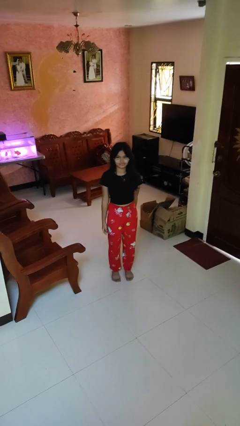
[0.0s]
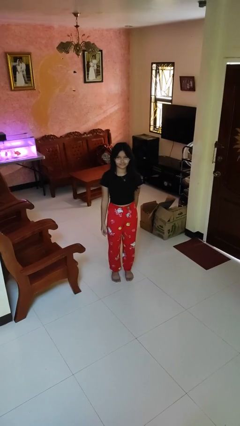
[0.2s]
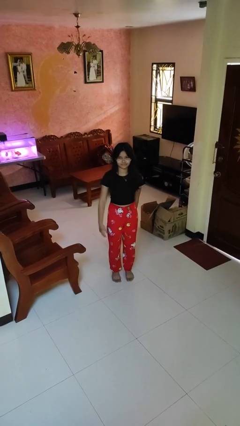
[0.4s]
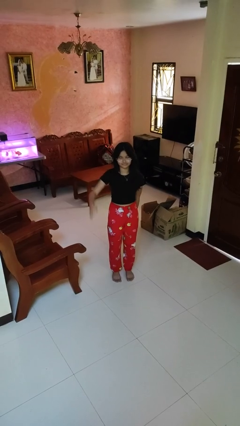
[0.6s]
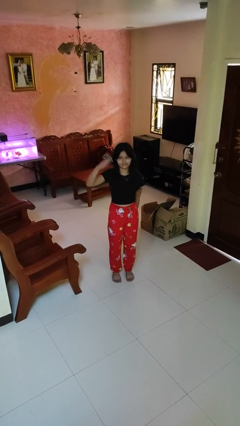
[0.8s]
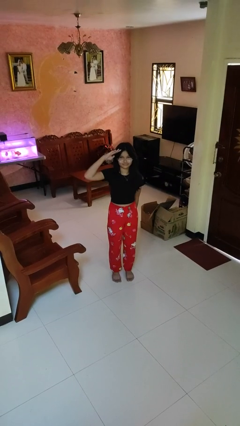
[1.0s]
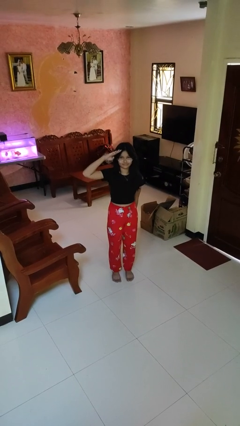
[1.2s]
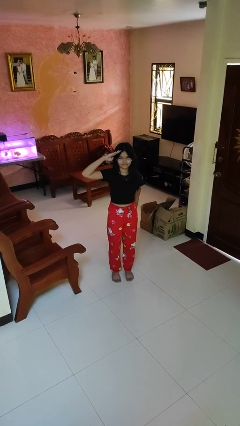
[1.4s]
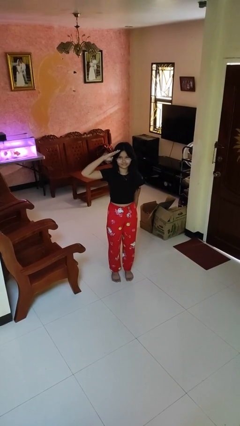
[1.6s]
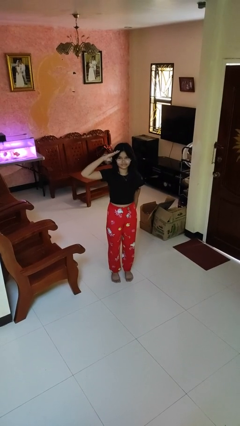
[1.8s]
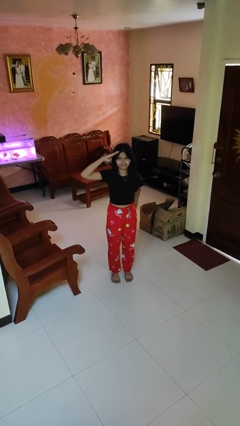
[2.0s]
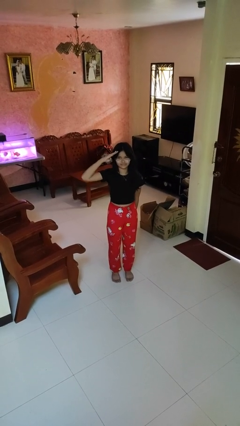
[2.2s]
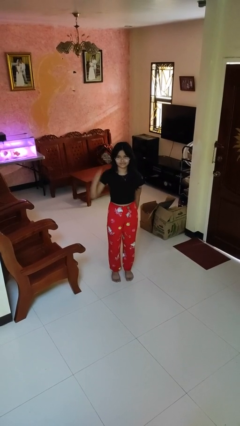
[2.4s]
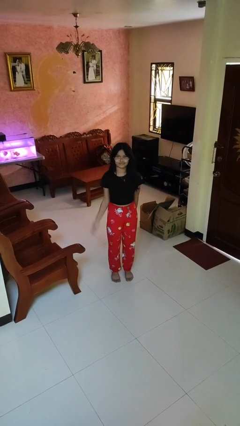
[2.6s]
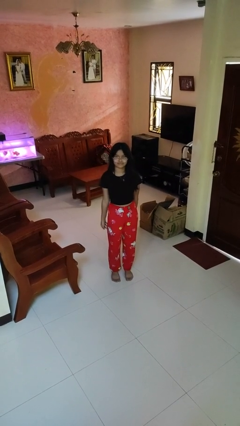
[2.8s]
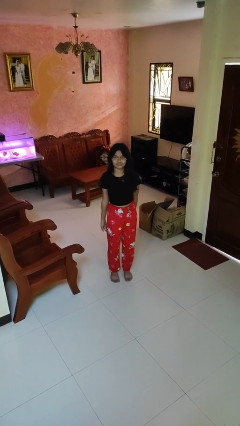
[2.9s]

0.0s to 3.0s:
person salutes

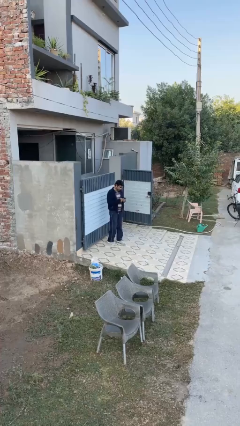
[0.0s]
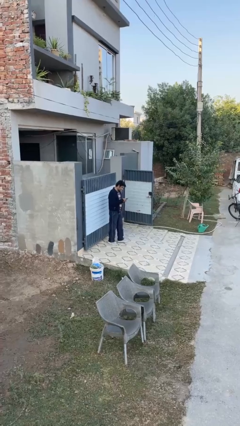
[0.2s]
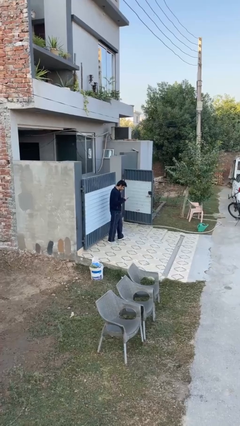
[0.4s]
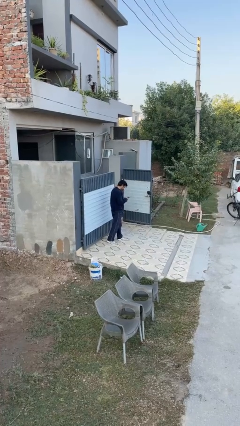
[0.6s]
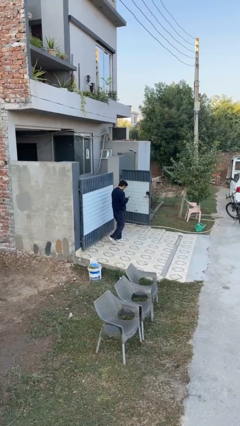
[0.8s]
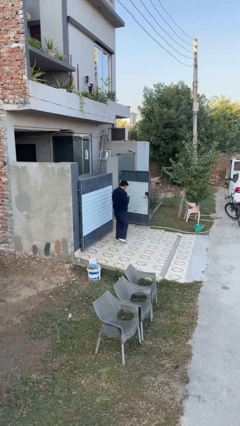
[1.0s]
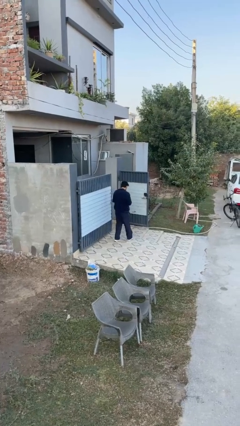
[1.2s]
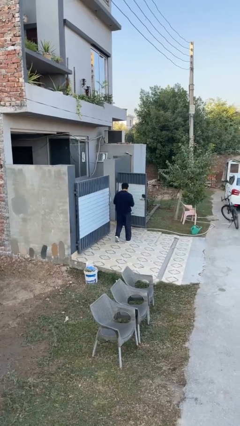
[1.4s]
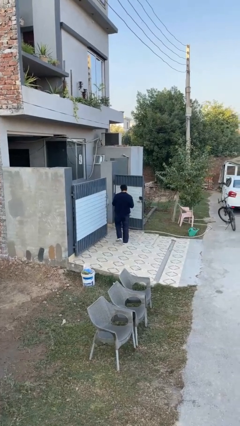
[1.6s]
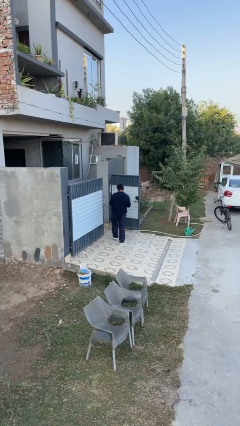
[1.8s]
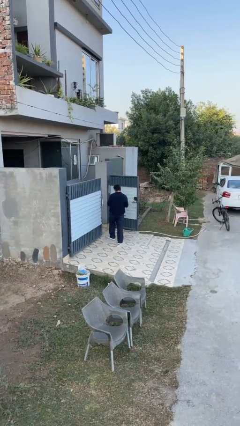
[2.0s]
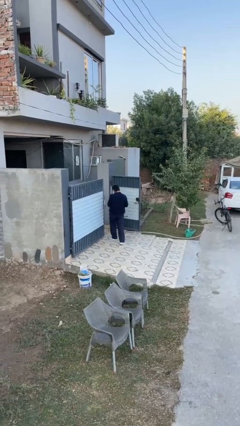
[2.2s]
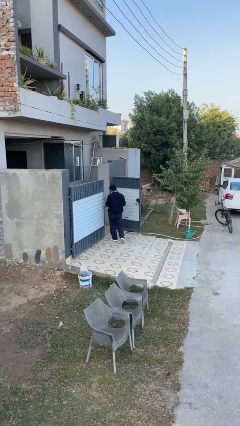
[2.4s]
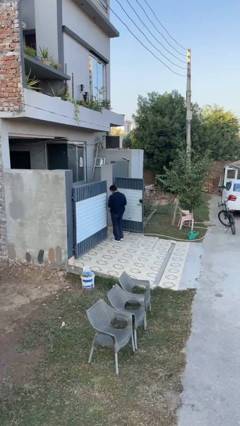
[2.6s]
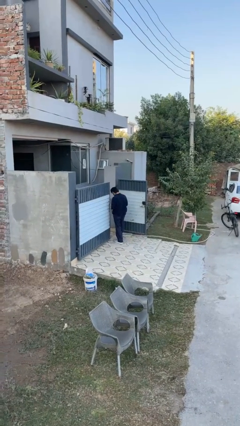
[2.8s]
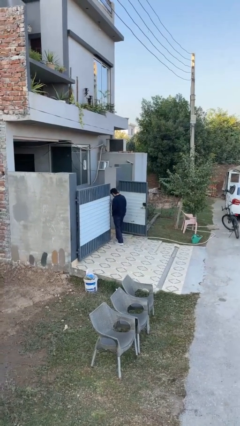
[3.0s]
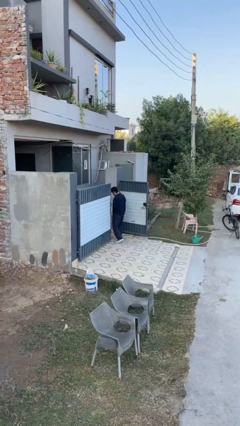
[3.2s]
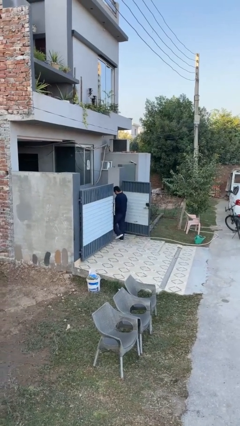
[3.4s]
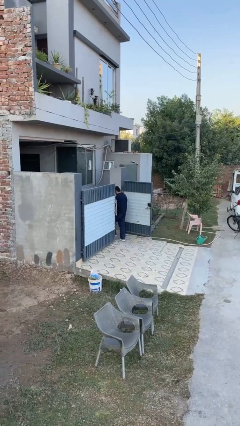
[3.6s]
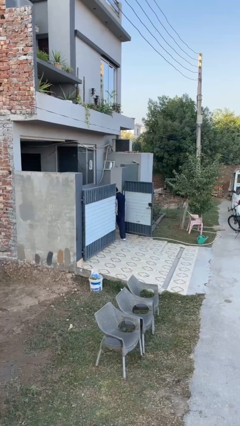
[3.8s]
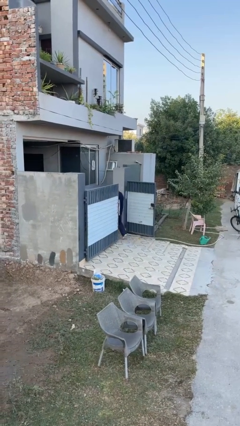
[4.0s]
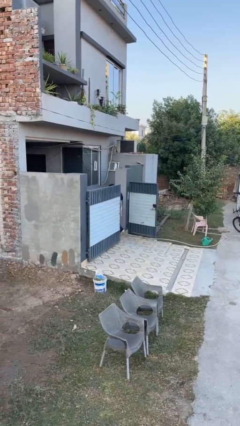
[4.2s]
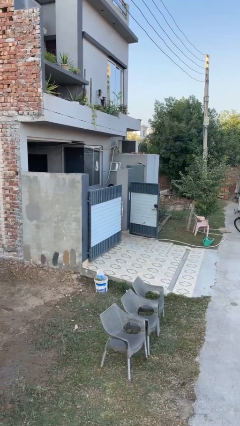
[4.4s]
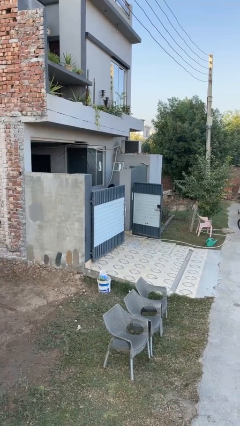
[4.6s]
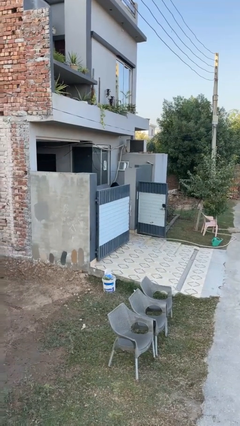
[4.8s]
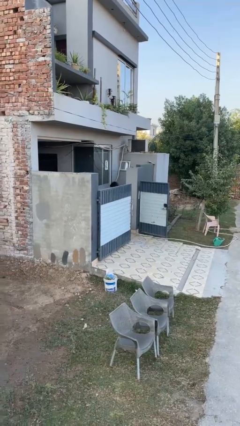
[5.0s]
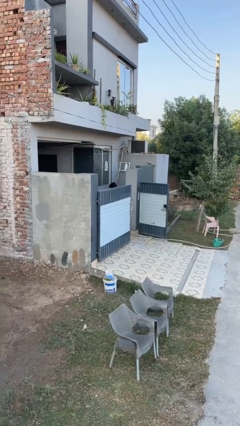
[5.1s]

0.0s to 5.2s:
person exits scene through structure

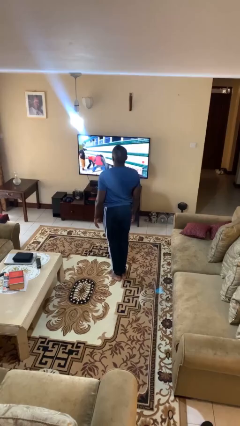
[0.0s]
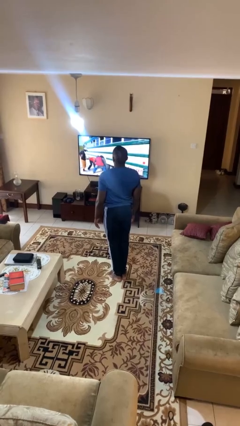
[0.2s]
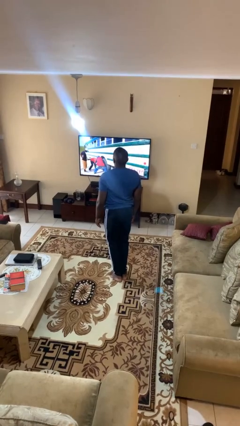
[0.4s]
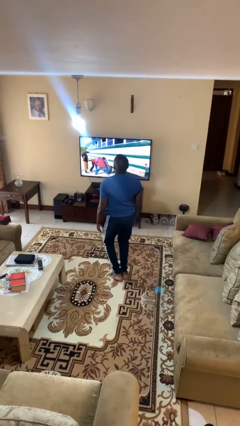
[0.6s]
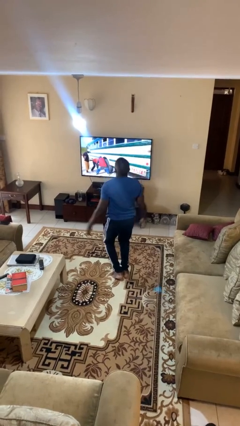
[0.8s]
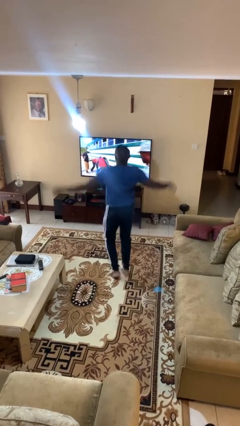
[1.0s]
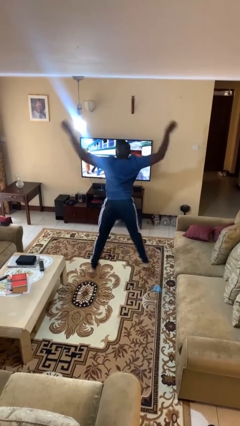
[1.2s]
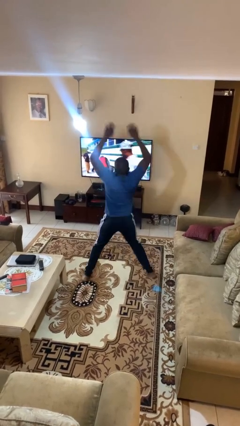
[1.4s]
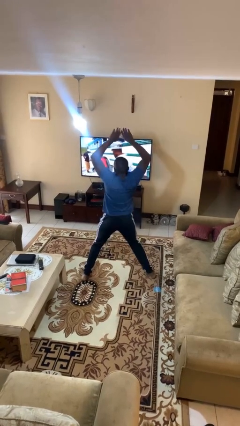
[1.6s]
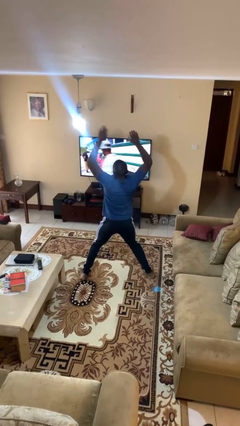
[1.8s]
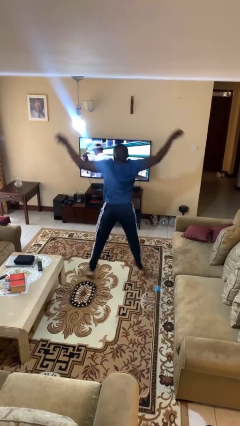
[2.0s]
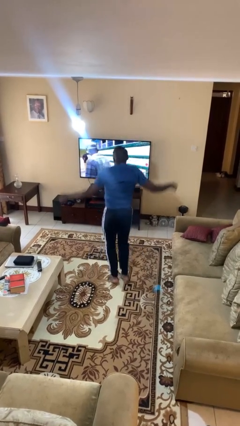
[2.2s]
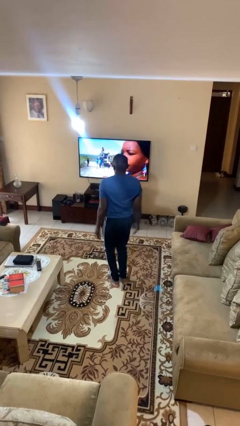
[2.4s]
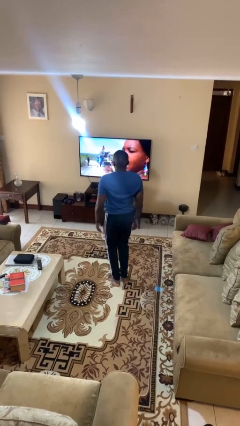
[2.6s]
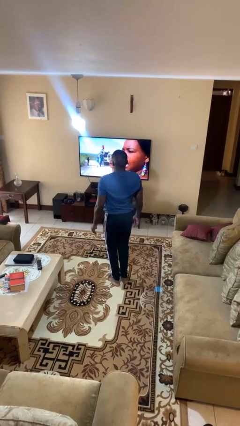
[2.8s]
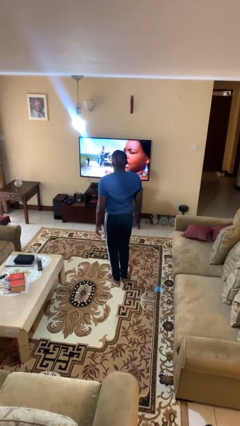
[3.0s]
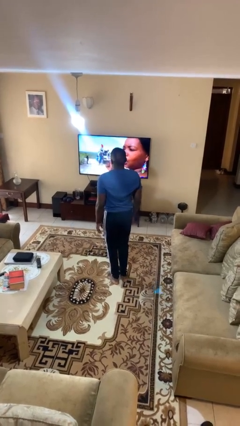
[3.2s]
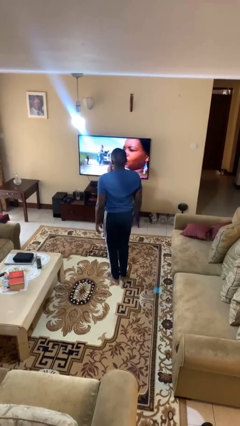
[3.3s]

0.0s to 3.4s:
person exercises with jumping jacks

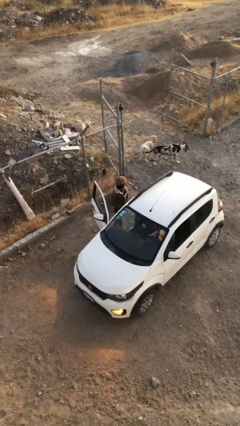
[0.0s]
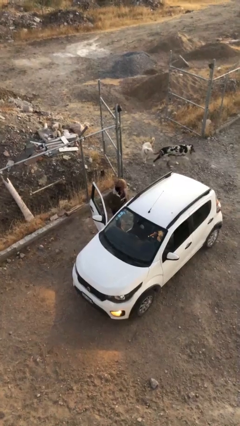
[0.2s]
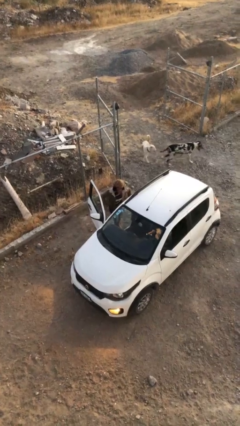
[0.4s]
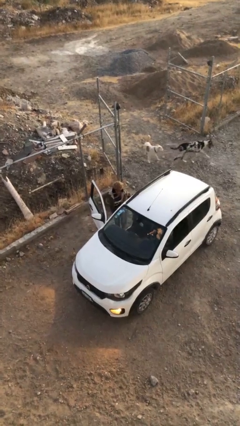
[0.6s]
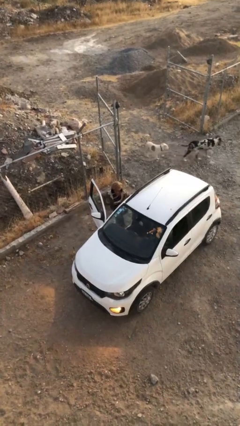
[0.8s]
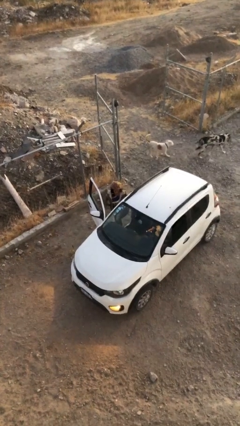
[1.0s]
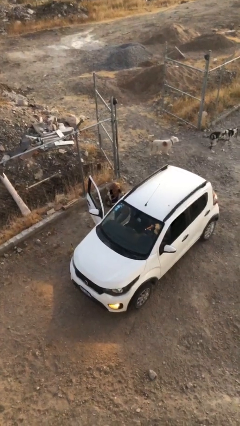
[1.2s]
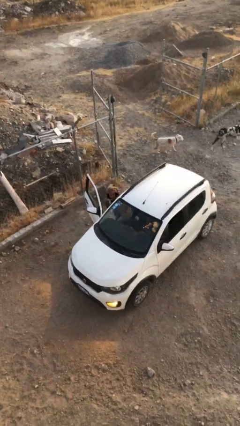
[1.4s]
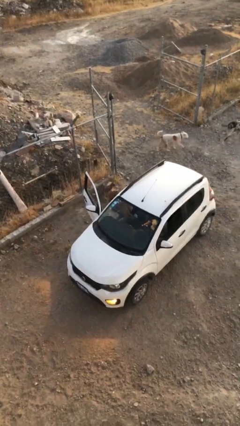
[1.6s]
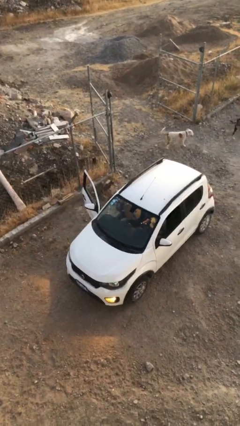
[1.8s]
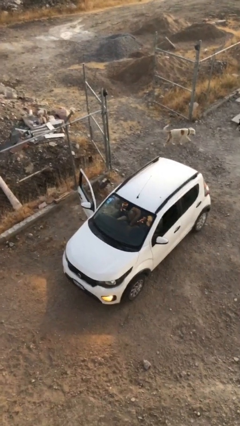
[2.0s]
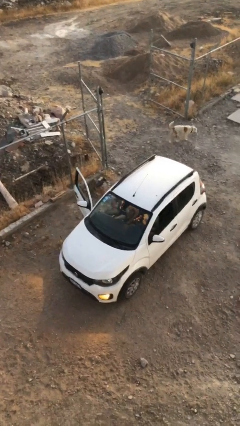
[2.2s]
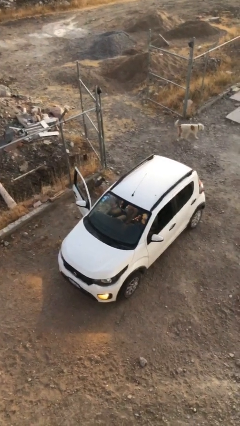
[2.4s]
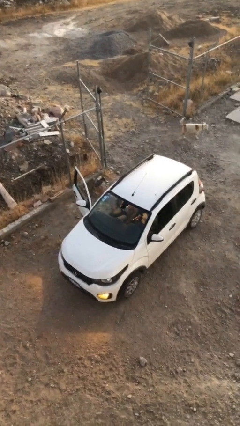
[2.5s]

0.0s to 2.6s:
person enters car

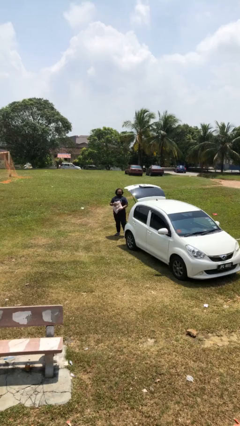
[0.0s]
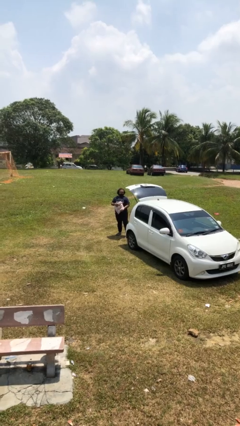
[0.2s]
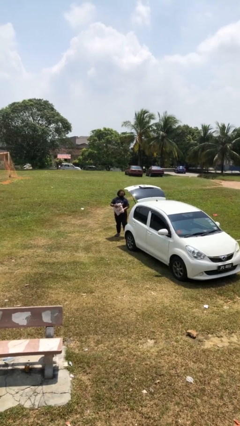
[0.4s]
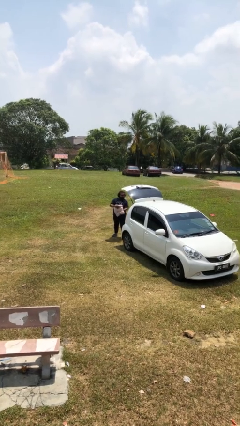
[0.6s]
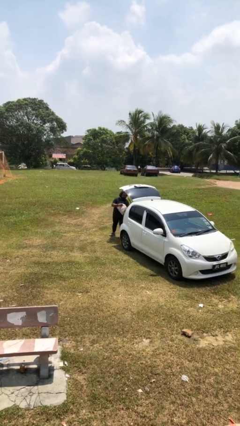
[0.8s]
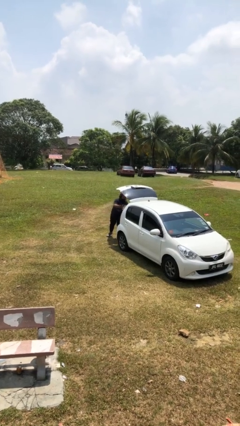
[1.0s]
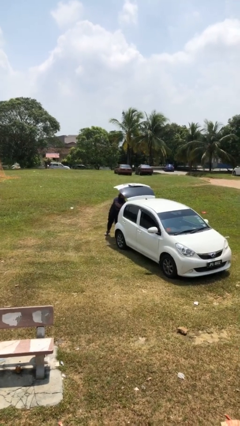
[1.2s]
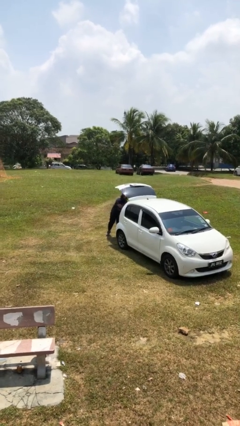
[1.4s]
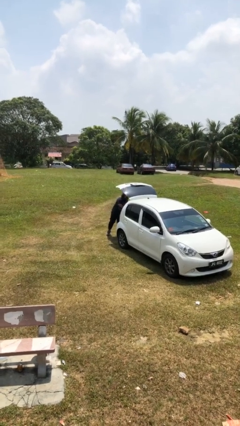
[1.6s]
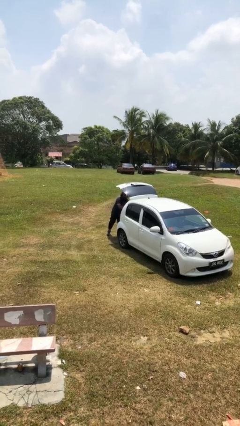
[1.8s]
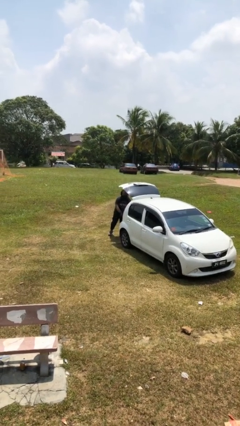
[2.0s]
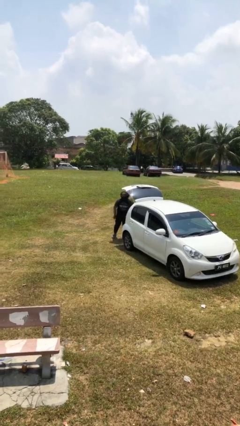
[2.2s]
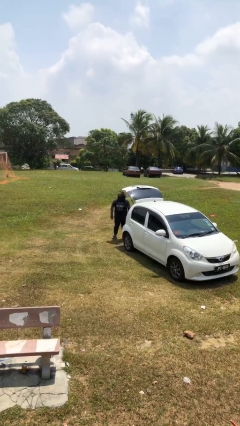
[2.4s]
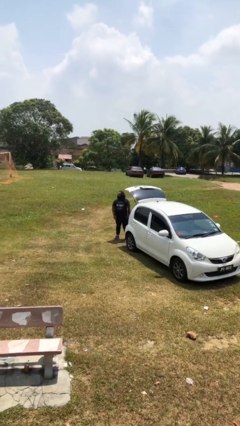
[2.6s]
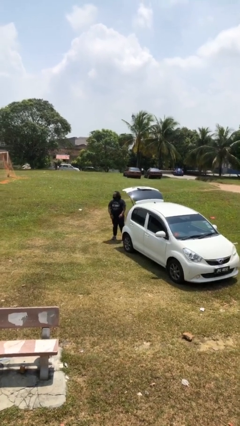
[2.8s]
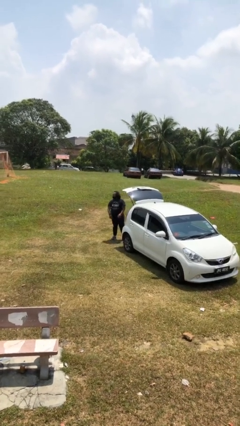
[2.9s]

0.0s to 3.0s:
person loads car
